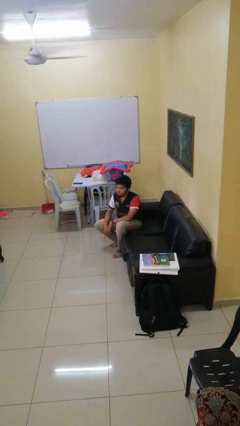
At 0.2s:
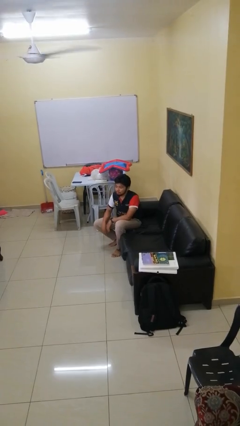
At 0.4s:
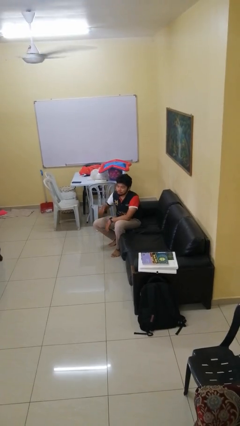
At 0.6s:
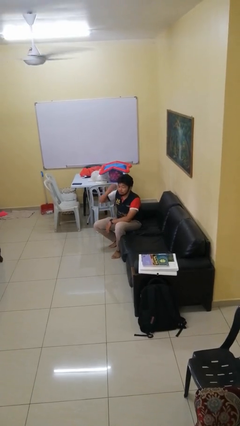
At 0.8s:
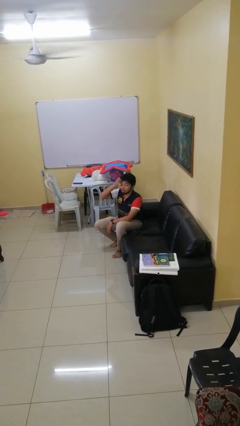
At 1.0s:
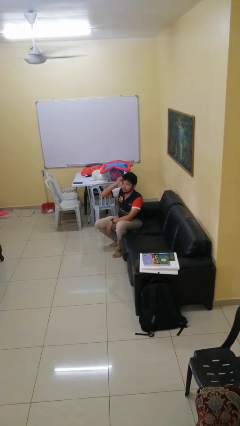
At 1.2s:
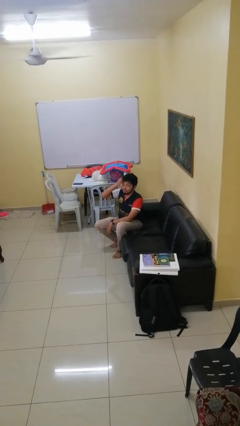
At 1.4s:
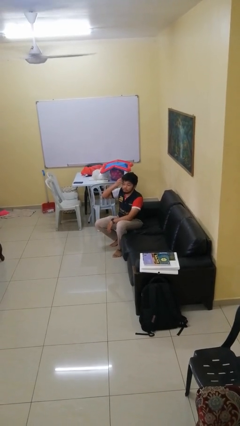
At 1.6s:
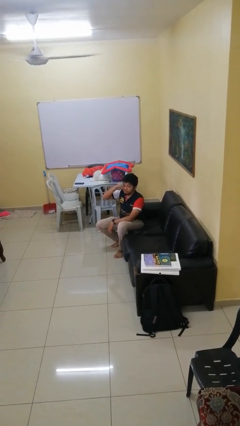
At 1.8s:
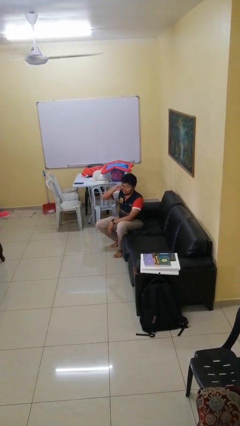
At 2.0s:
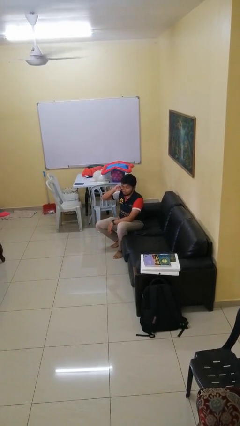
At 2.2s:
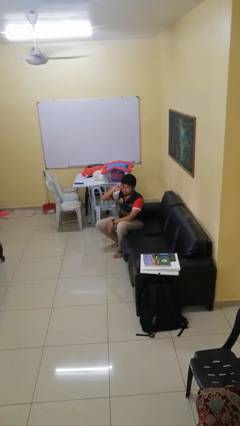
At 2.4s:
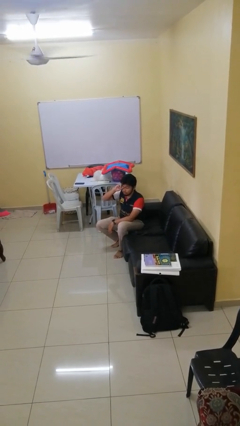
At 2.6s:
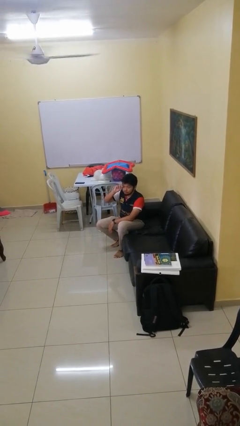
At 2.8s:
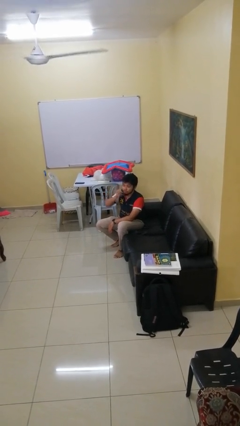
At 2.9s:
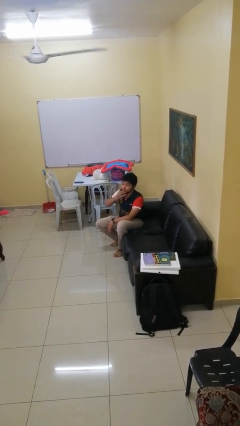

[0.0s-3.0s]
person scratches face

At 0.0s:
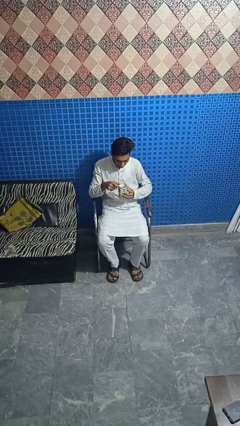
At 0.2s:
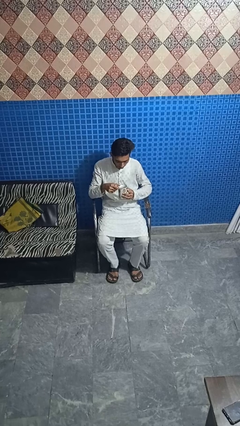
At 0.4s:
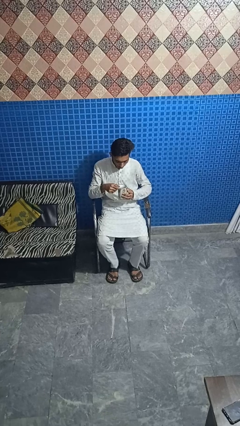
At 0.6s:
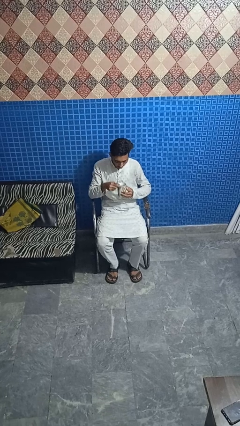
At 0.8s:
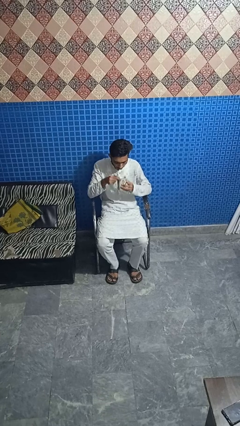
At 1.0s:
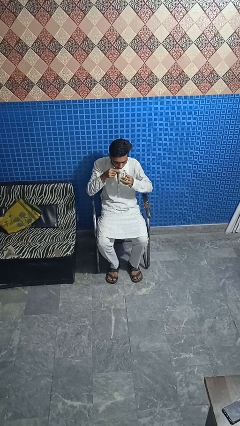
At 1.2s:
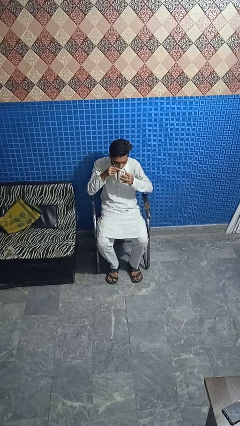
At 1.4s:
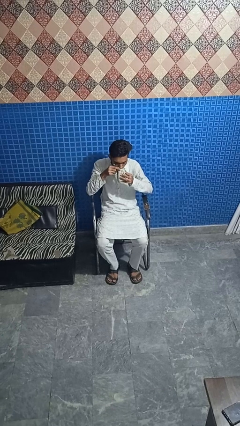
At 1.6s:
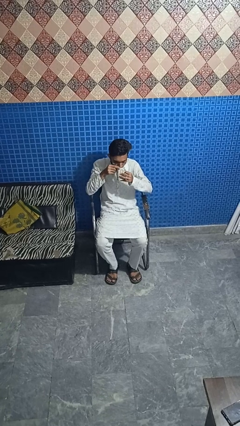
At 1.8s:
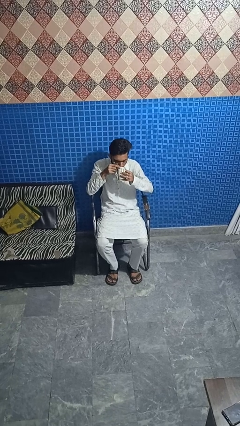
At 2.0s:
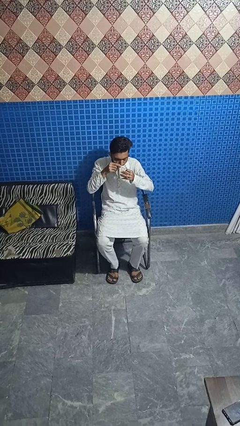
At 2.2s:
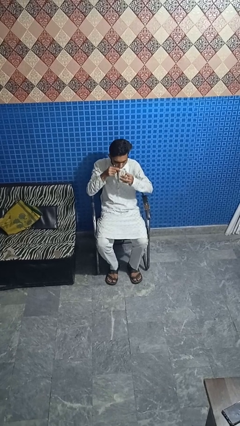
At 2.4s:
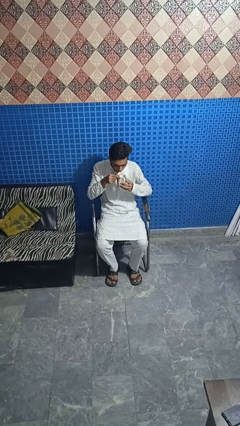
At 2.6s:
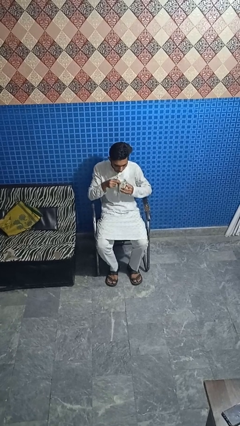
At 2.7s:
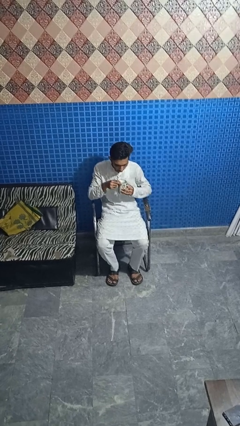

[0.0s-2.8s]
person drinks from mug

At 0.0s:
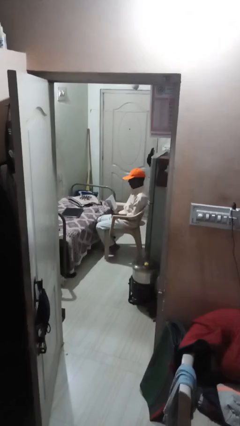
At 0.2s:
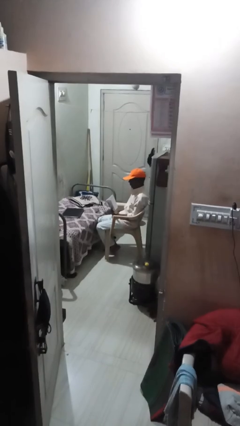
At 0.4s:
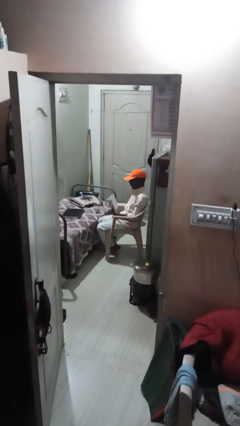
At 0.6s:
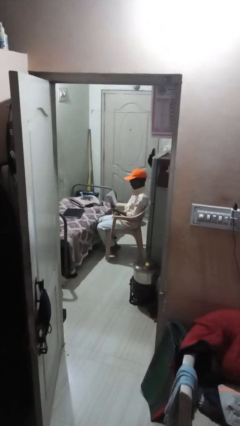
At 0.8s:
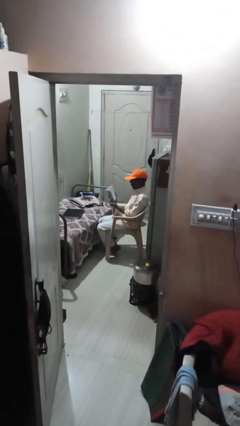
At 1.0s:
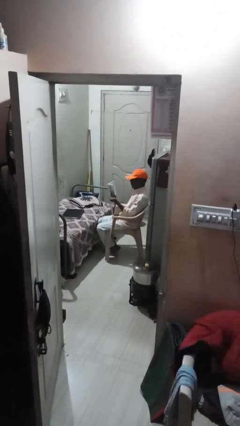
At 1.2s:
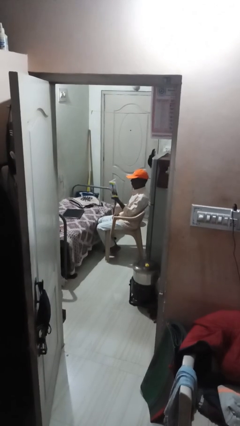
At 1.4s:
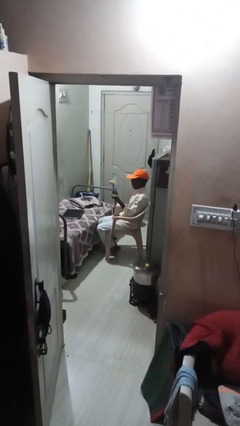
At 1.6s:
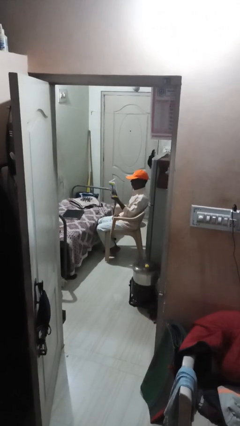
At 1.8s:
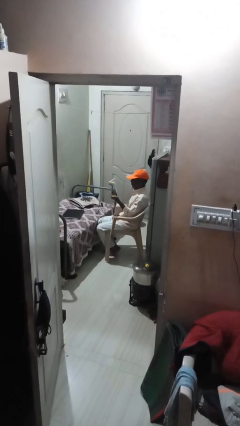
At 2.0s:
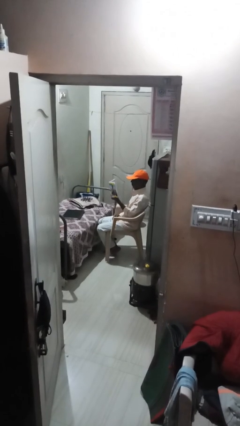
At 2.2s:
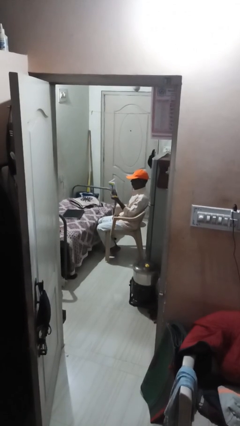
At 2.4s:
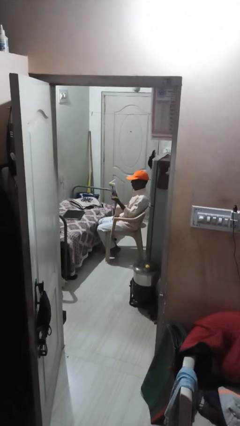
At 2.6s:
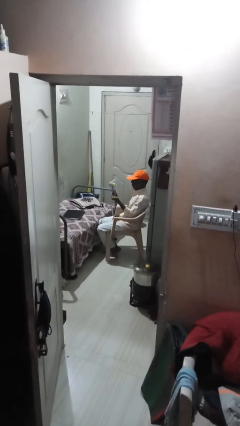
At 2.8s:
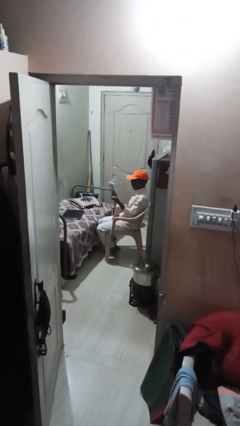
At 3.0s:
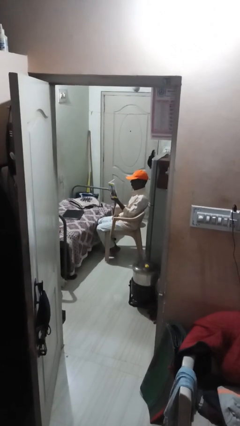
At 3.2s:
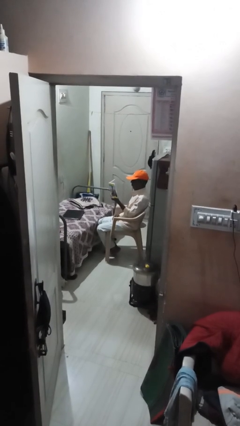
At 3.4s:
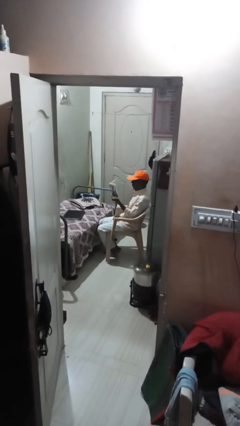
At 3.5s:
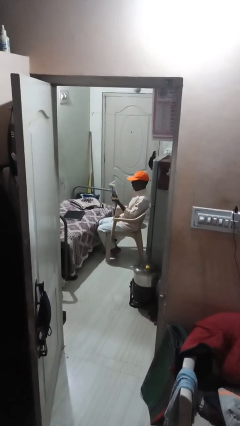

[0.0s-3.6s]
person reads document

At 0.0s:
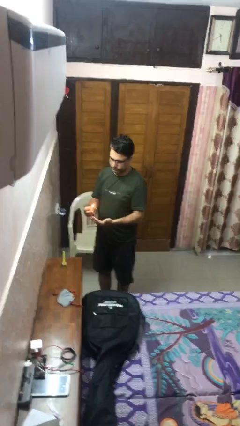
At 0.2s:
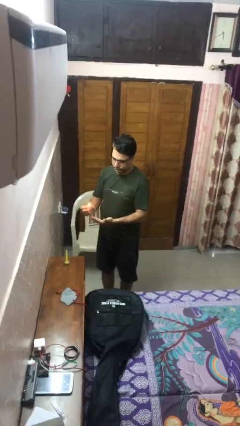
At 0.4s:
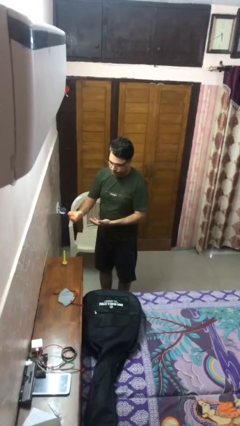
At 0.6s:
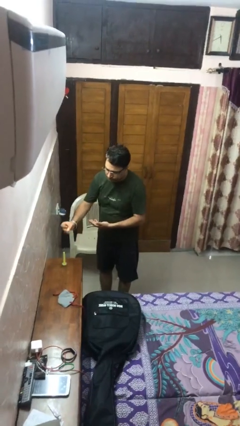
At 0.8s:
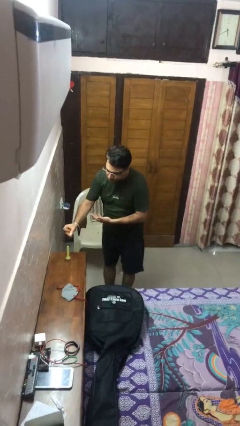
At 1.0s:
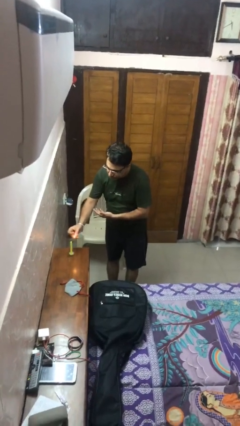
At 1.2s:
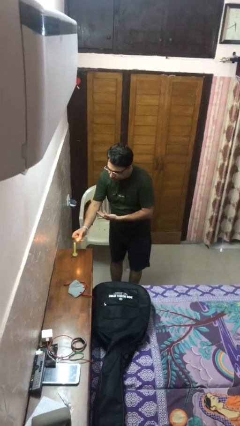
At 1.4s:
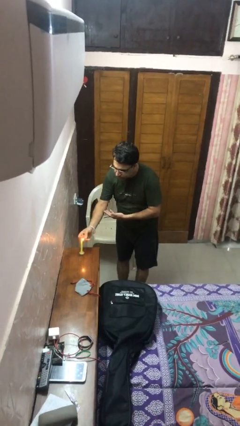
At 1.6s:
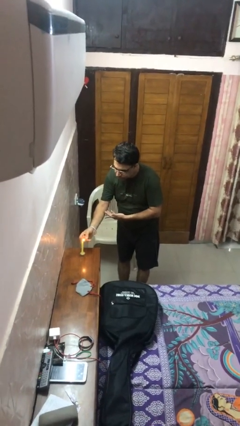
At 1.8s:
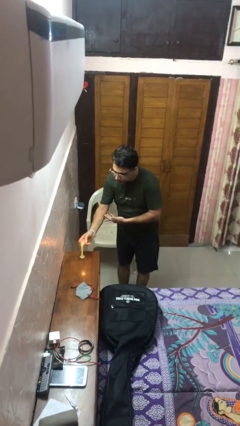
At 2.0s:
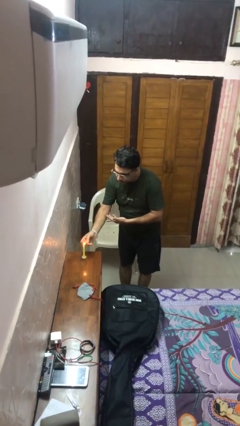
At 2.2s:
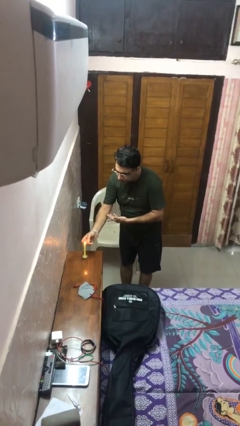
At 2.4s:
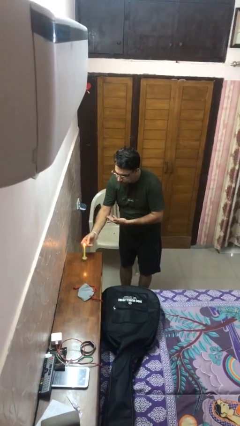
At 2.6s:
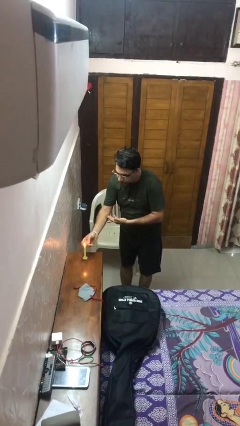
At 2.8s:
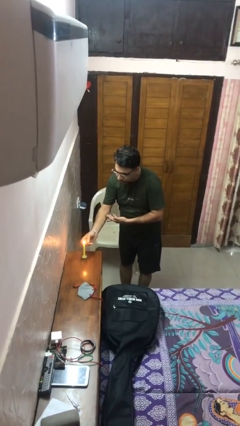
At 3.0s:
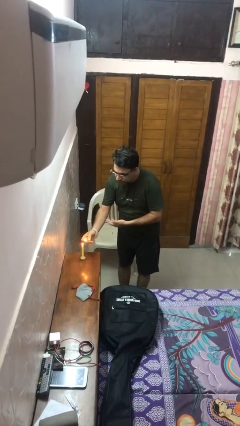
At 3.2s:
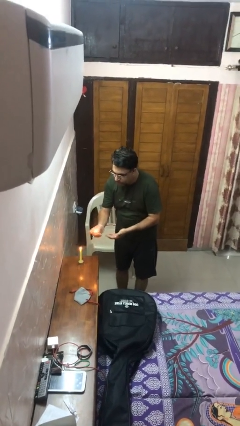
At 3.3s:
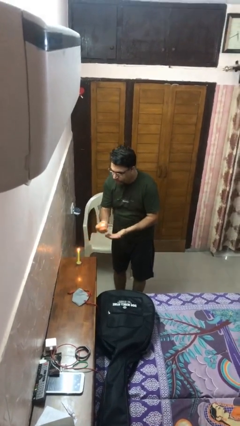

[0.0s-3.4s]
person lights candle

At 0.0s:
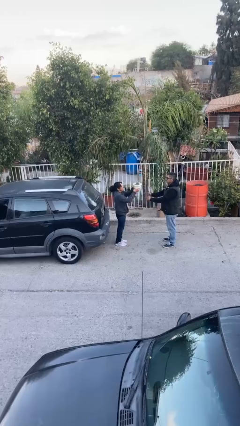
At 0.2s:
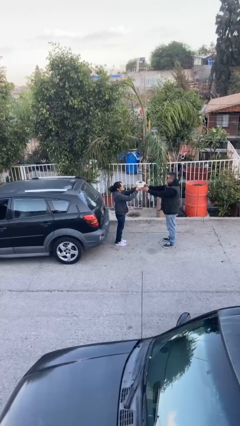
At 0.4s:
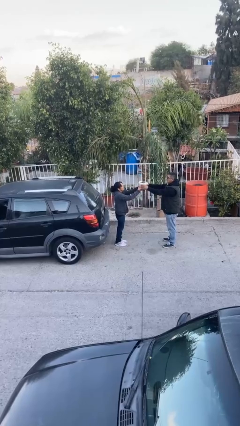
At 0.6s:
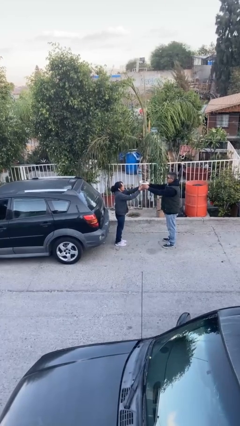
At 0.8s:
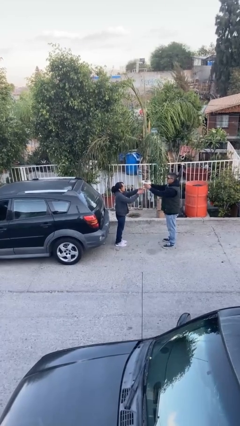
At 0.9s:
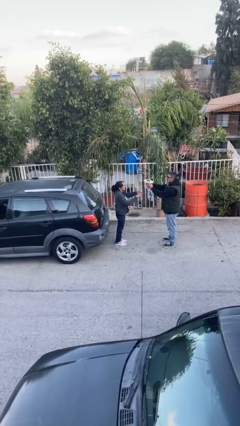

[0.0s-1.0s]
person transfers object to person

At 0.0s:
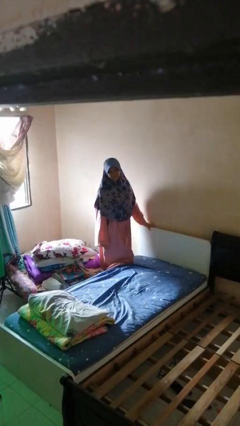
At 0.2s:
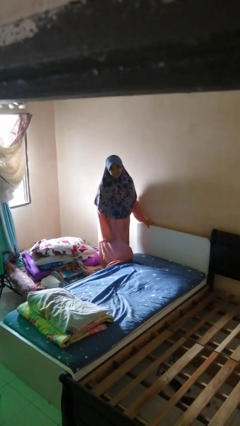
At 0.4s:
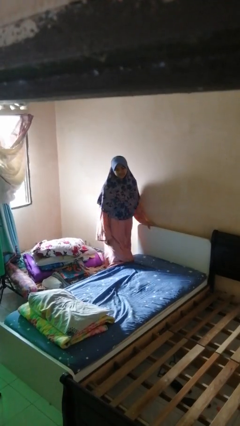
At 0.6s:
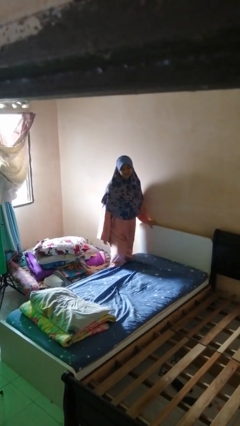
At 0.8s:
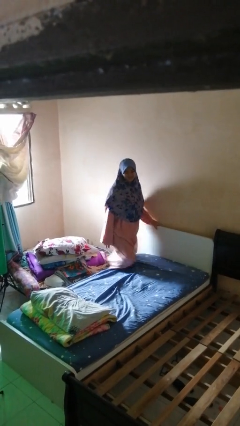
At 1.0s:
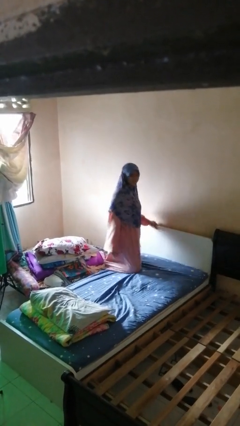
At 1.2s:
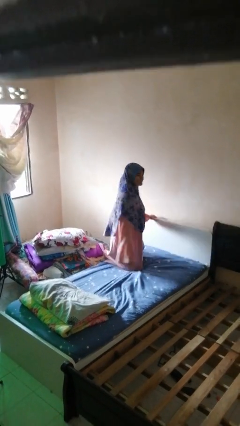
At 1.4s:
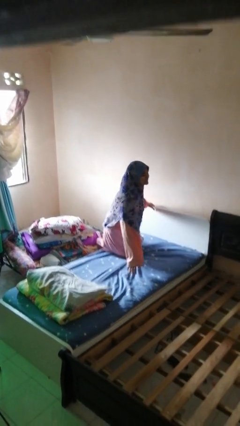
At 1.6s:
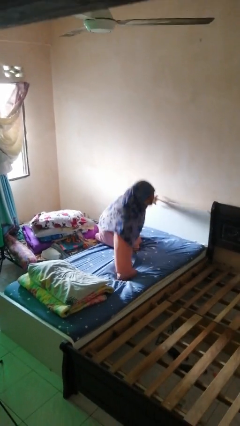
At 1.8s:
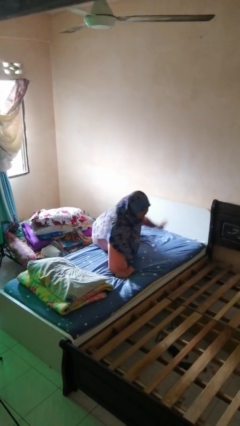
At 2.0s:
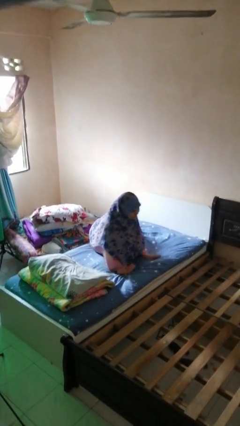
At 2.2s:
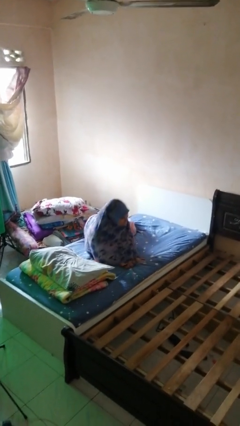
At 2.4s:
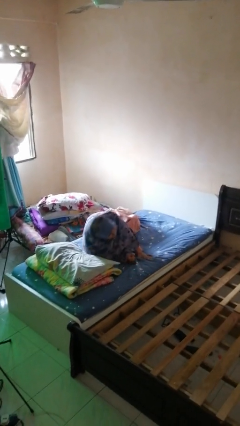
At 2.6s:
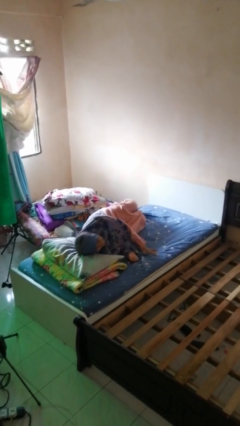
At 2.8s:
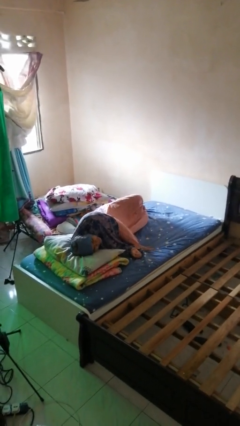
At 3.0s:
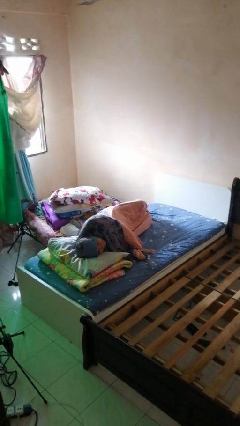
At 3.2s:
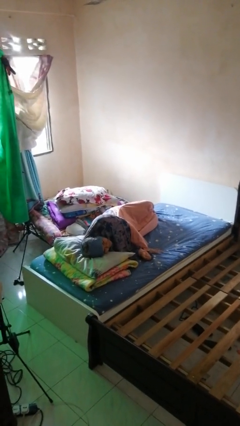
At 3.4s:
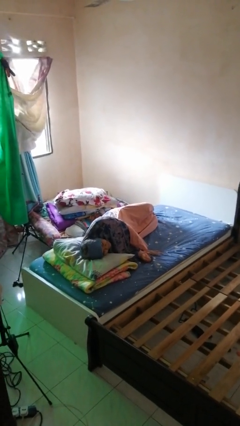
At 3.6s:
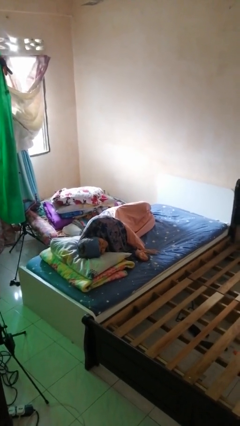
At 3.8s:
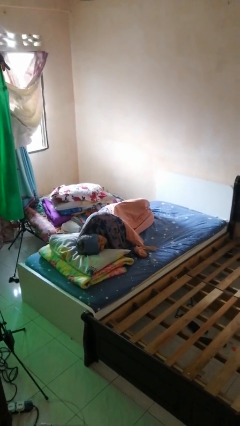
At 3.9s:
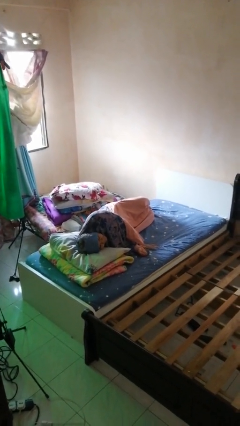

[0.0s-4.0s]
person lies down on bed
